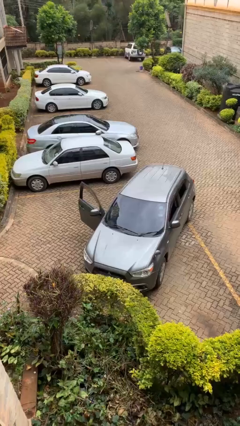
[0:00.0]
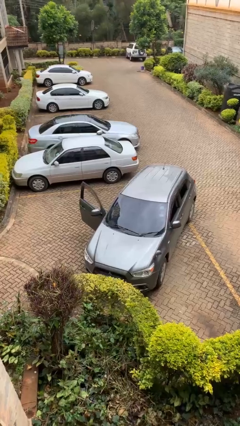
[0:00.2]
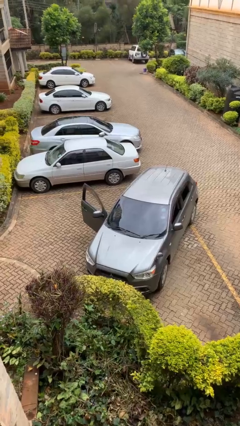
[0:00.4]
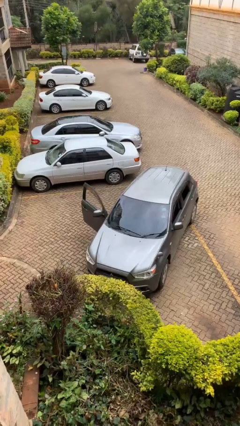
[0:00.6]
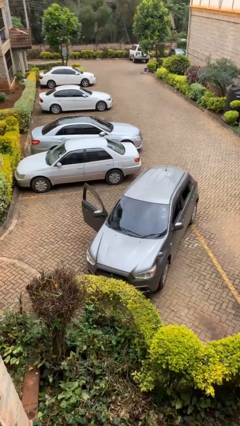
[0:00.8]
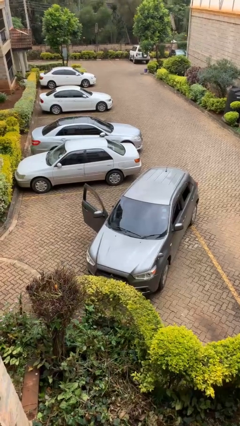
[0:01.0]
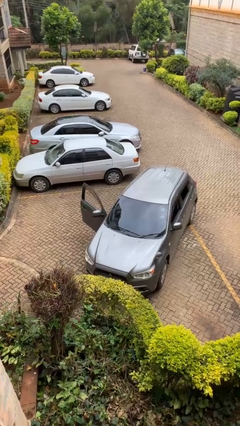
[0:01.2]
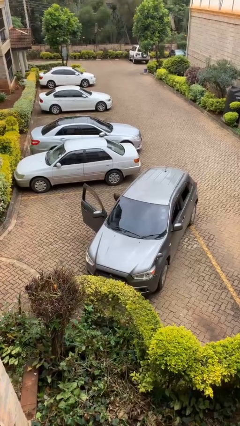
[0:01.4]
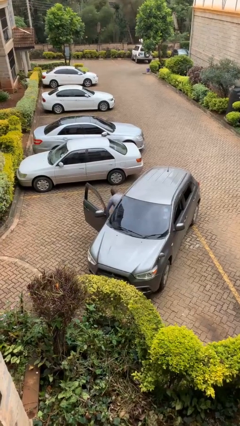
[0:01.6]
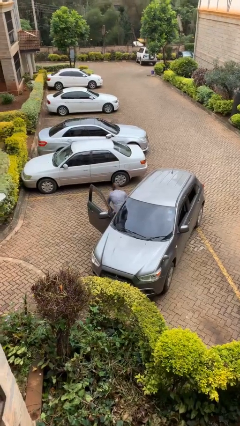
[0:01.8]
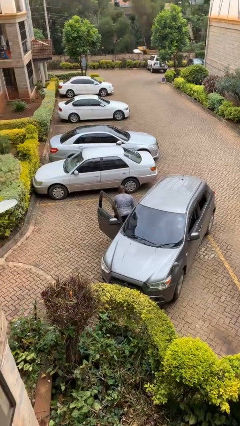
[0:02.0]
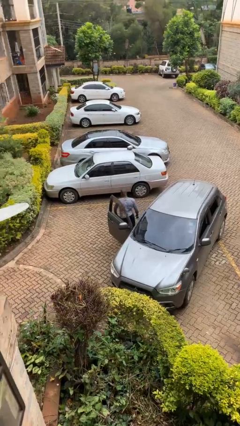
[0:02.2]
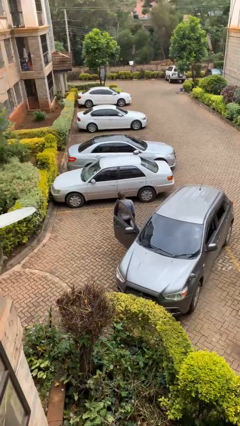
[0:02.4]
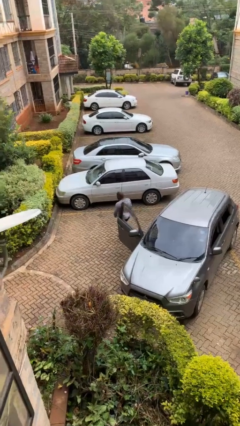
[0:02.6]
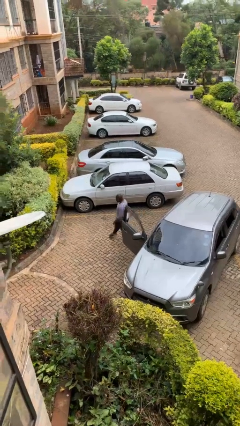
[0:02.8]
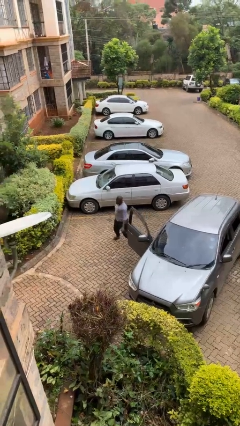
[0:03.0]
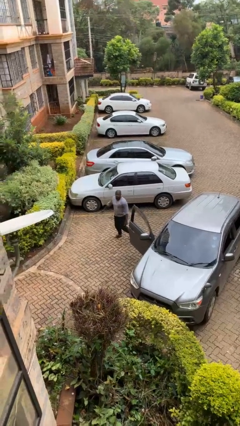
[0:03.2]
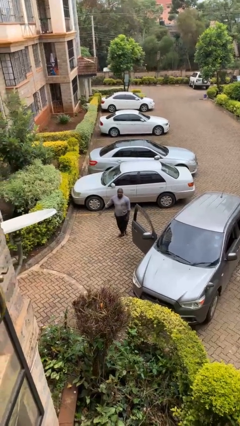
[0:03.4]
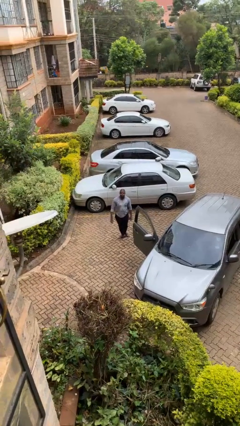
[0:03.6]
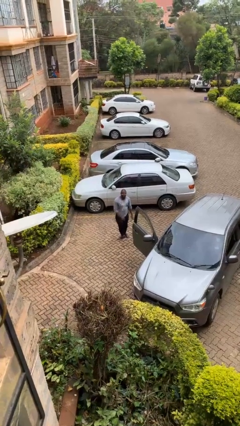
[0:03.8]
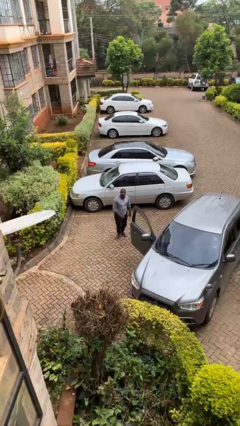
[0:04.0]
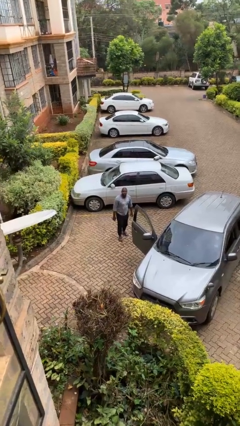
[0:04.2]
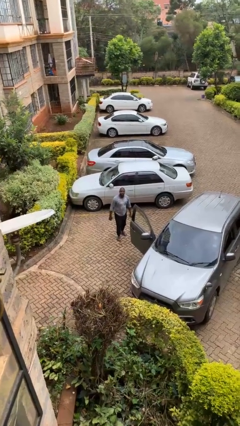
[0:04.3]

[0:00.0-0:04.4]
person exits car

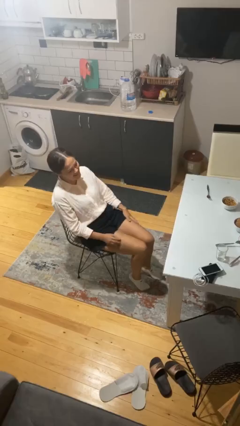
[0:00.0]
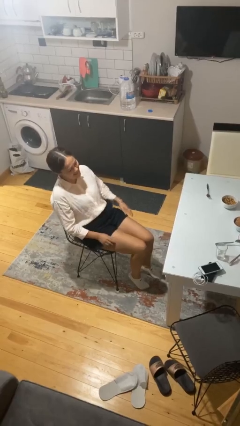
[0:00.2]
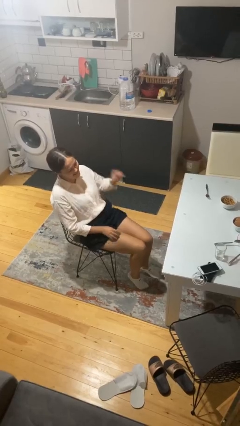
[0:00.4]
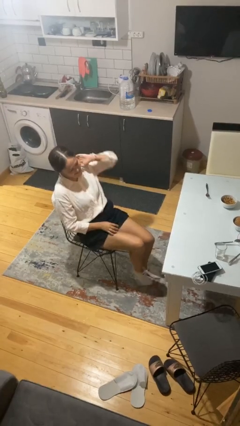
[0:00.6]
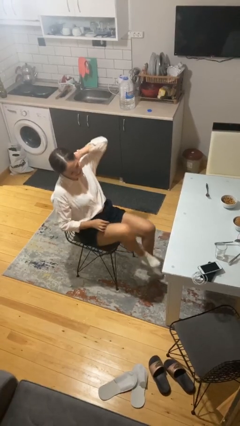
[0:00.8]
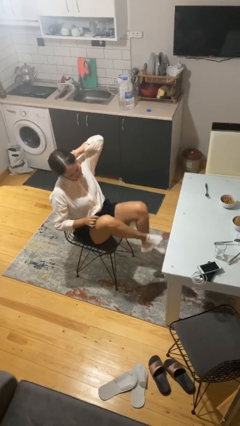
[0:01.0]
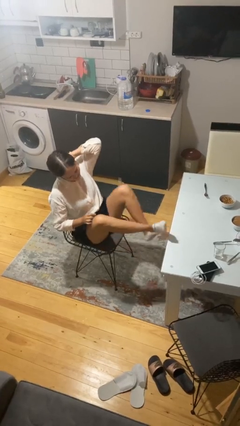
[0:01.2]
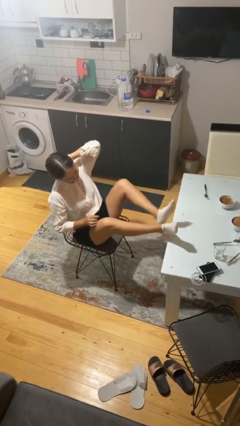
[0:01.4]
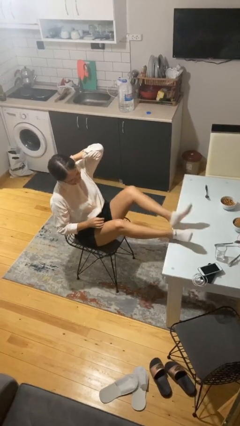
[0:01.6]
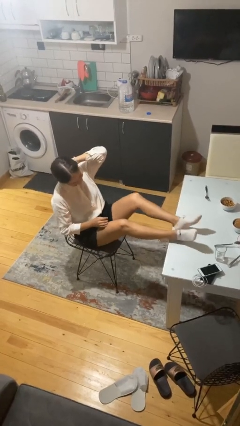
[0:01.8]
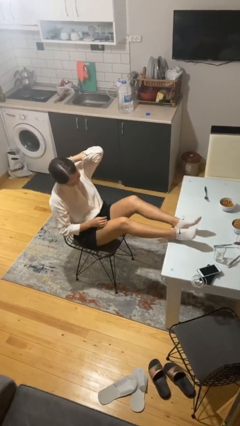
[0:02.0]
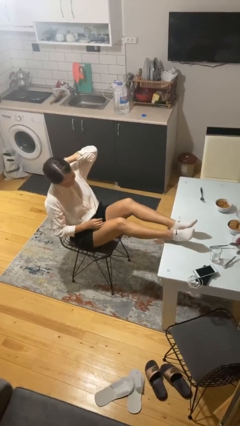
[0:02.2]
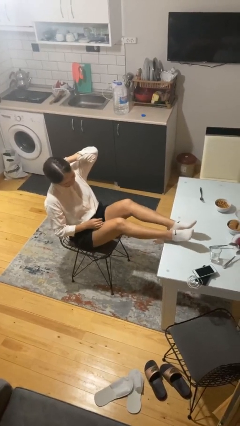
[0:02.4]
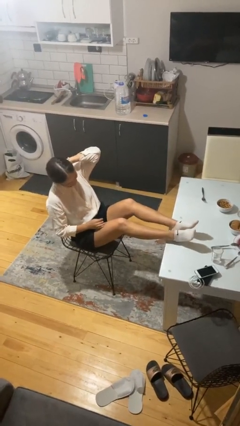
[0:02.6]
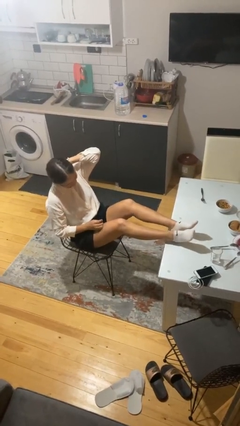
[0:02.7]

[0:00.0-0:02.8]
person puts feet up

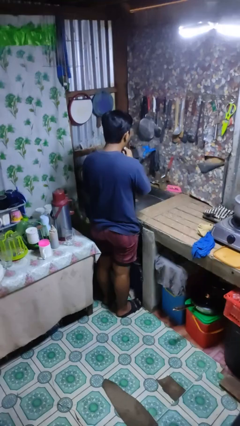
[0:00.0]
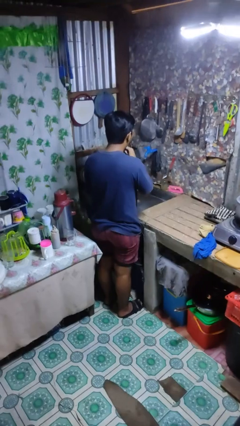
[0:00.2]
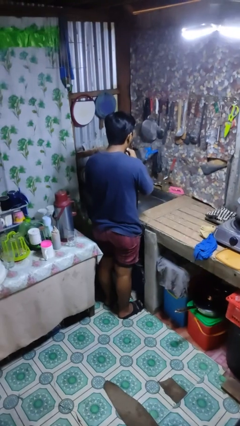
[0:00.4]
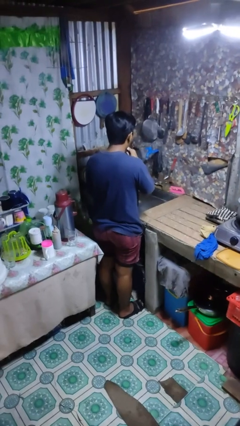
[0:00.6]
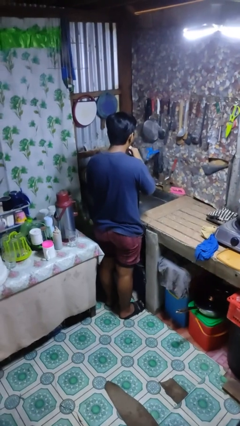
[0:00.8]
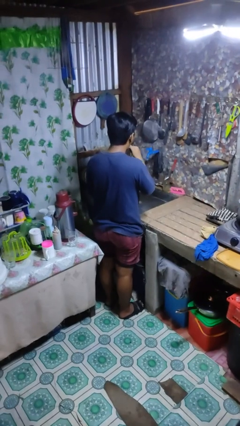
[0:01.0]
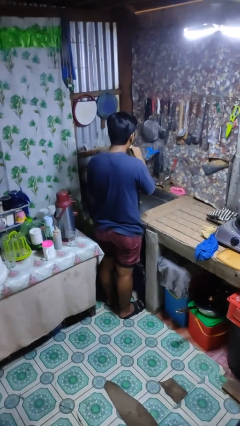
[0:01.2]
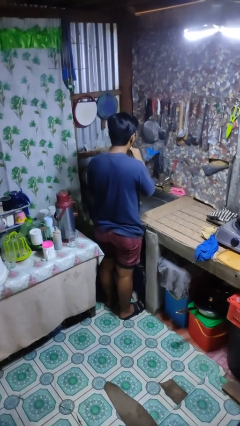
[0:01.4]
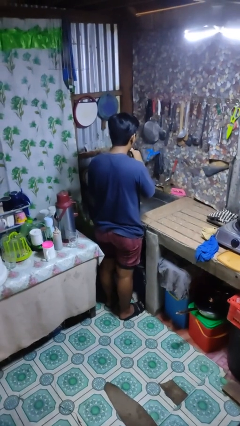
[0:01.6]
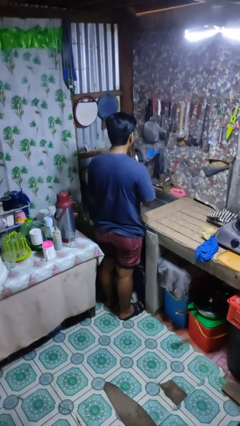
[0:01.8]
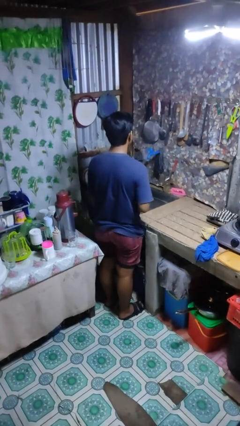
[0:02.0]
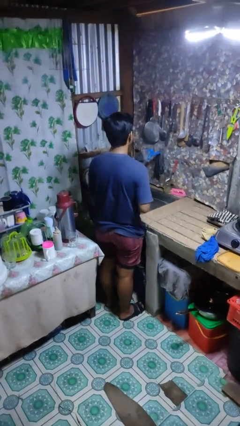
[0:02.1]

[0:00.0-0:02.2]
person brushes teeth

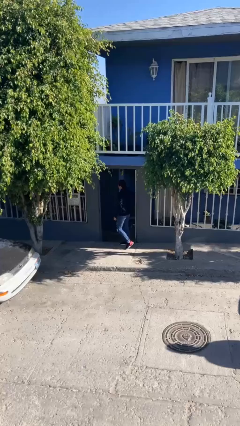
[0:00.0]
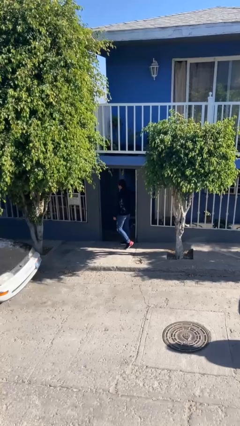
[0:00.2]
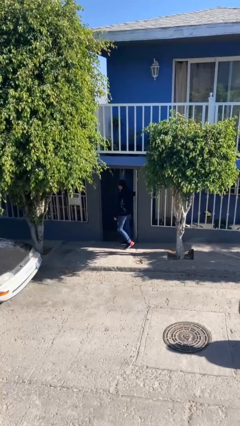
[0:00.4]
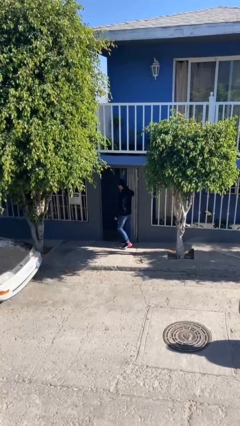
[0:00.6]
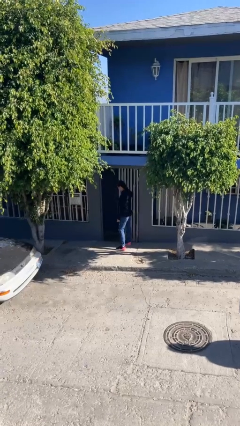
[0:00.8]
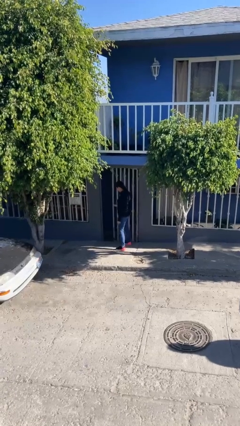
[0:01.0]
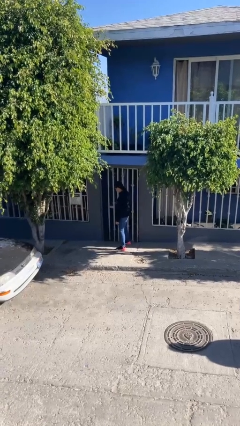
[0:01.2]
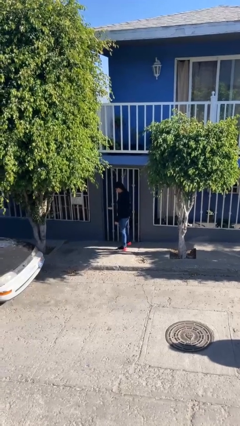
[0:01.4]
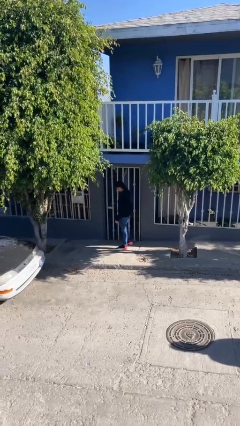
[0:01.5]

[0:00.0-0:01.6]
person closes facility door

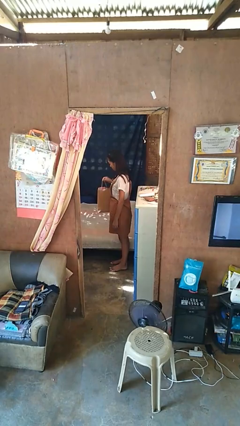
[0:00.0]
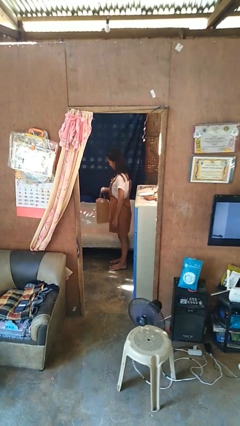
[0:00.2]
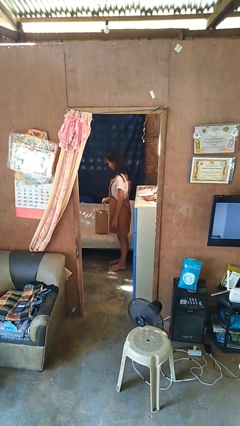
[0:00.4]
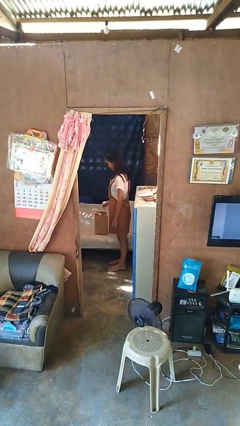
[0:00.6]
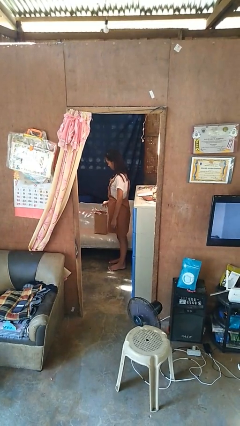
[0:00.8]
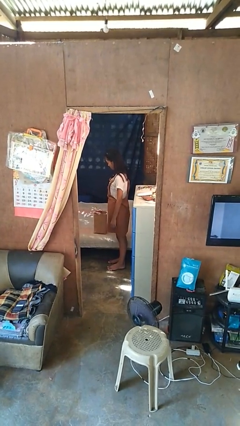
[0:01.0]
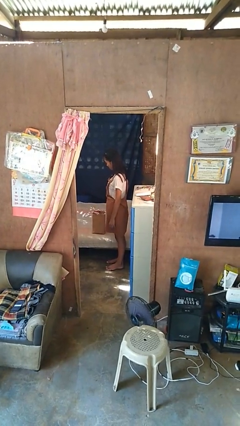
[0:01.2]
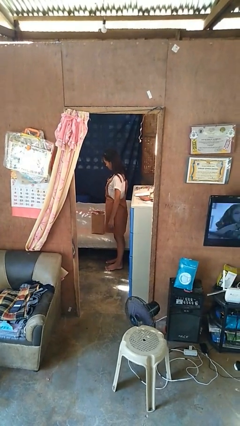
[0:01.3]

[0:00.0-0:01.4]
person puts down object on couch

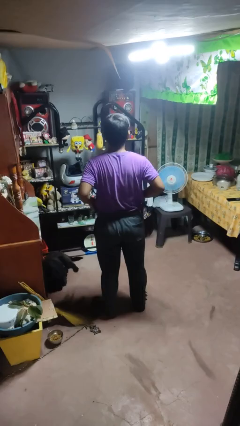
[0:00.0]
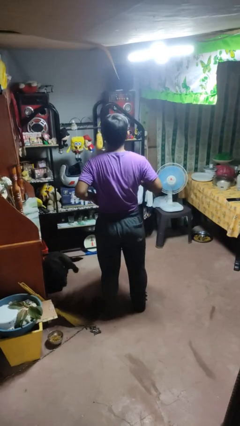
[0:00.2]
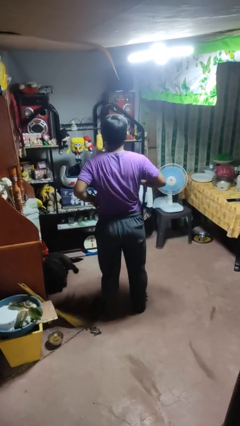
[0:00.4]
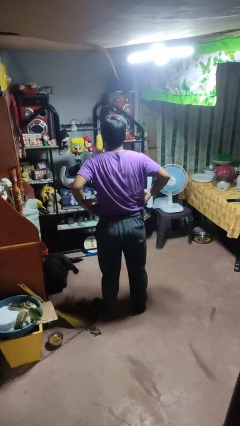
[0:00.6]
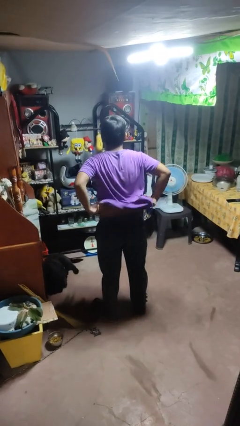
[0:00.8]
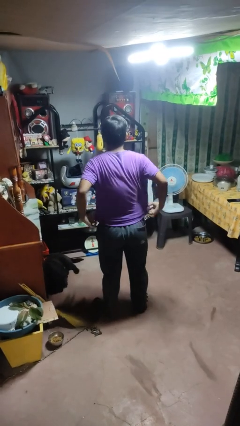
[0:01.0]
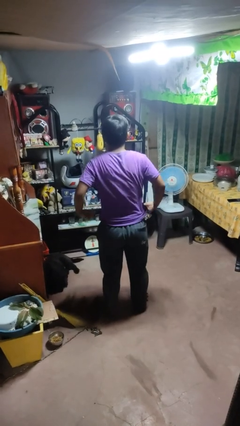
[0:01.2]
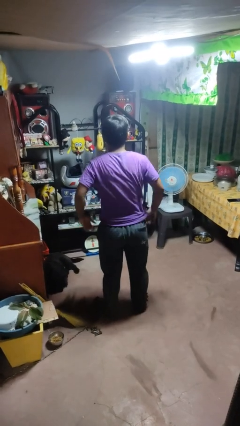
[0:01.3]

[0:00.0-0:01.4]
person untucks shirt

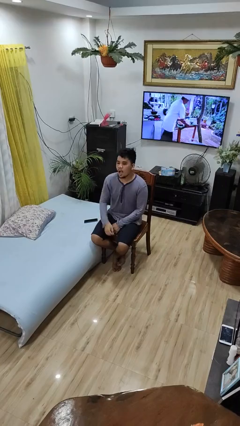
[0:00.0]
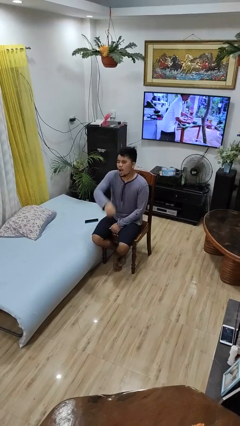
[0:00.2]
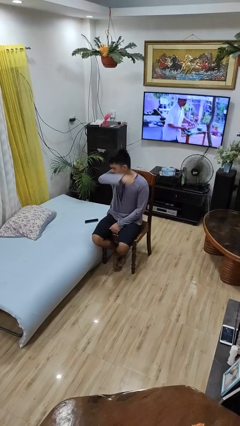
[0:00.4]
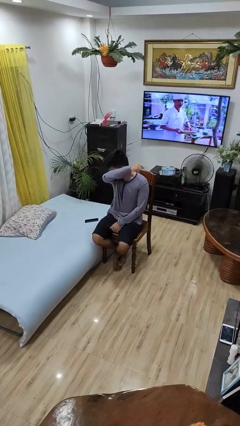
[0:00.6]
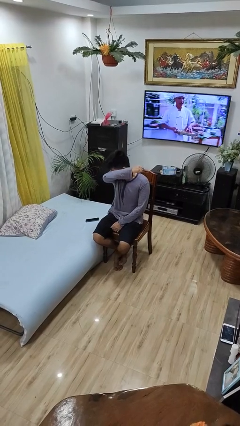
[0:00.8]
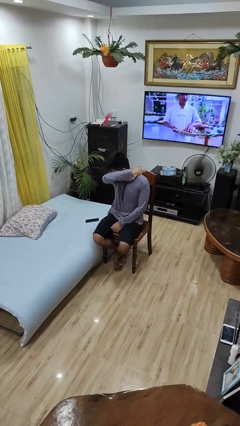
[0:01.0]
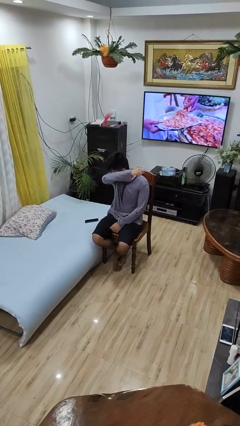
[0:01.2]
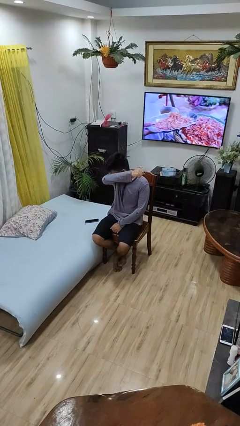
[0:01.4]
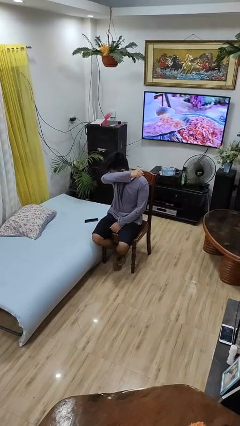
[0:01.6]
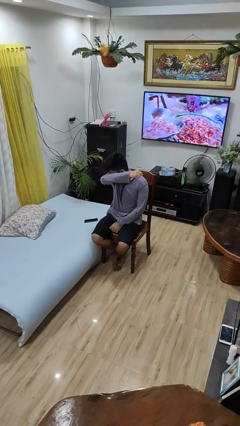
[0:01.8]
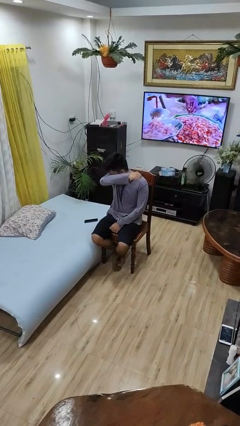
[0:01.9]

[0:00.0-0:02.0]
person sneezes into arm

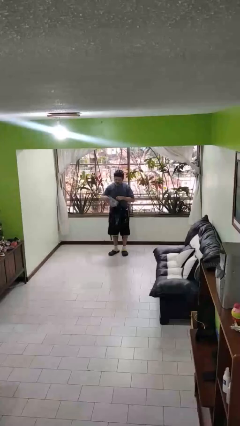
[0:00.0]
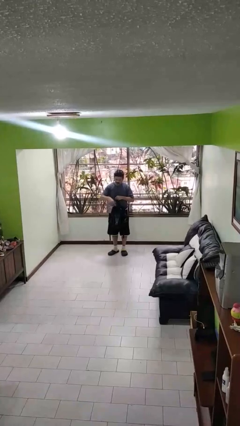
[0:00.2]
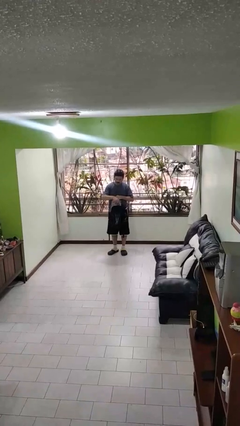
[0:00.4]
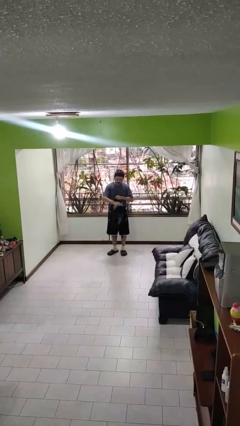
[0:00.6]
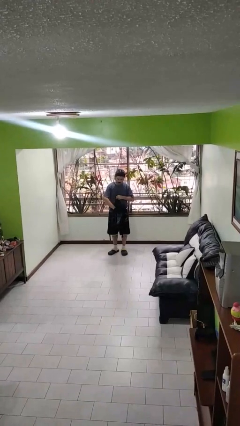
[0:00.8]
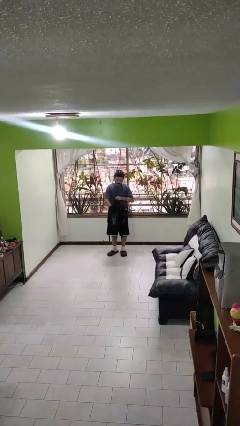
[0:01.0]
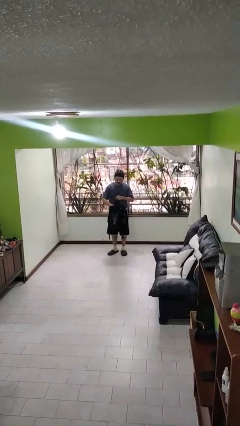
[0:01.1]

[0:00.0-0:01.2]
person puts object into backpack
